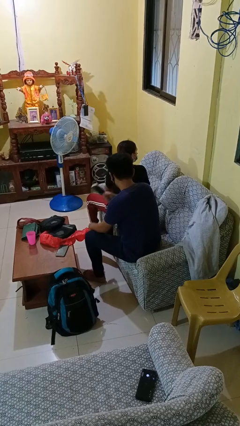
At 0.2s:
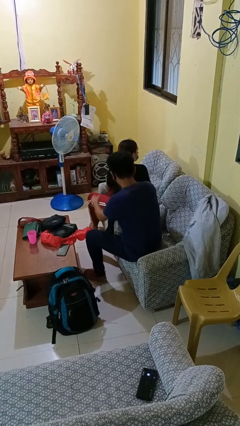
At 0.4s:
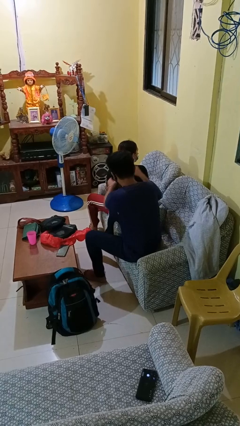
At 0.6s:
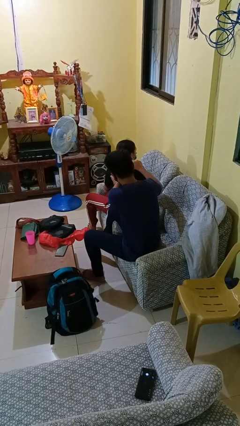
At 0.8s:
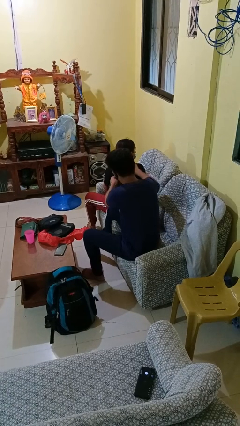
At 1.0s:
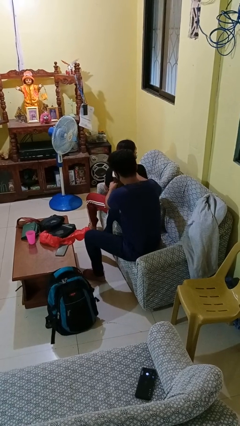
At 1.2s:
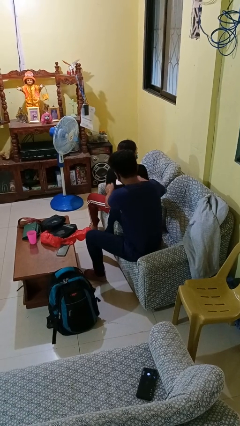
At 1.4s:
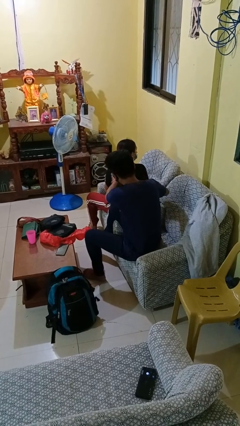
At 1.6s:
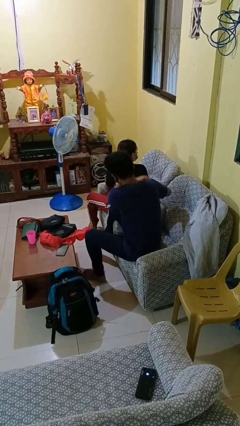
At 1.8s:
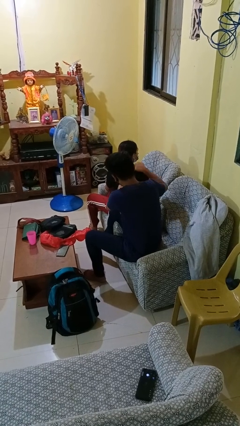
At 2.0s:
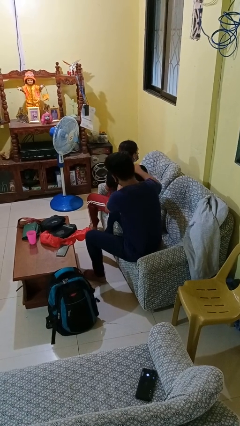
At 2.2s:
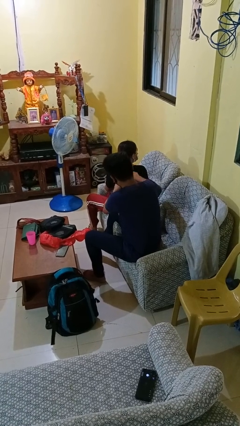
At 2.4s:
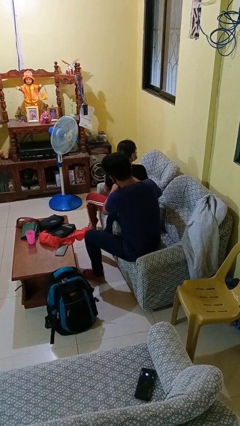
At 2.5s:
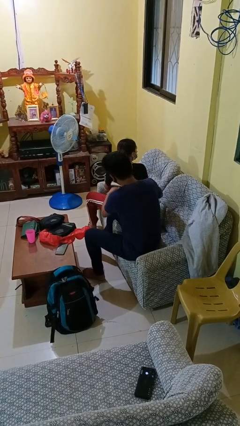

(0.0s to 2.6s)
person brushes hair of person

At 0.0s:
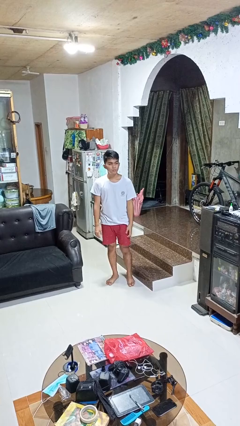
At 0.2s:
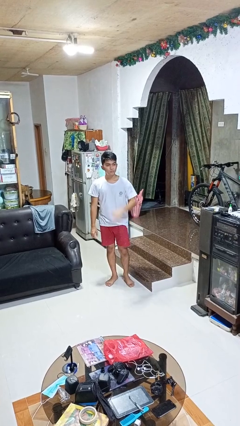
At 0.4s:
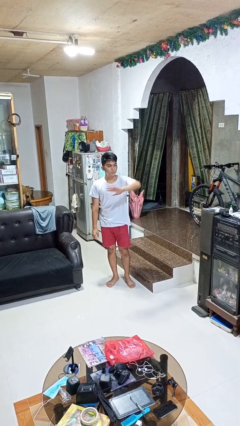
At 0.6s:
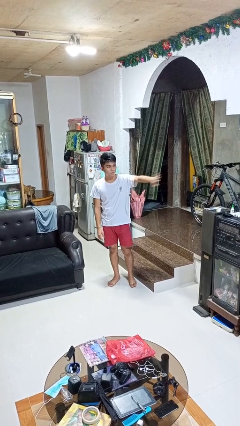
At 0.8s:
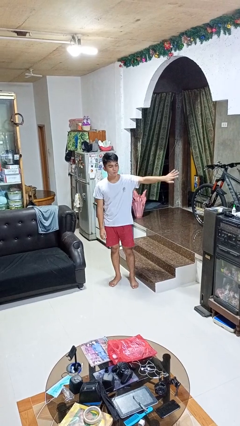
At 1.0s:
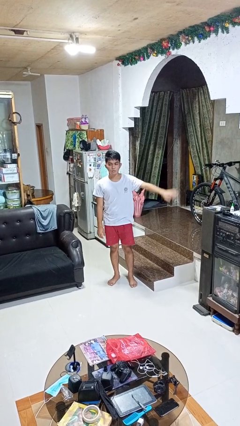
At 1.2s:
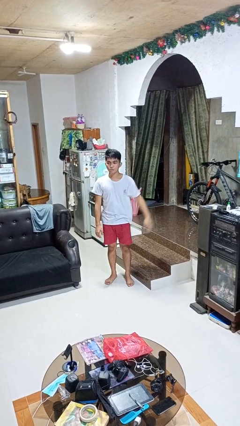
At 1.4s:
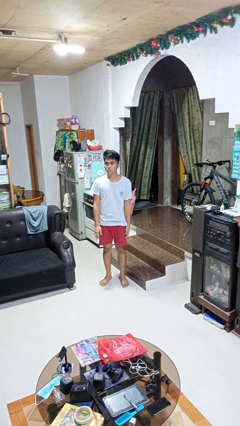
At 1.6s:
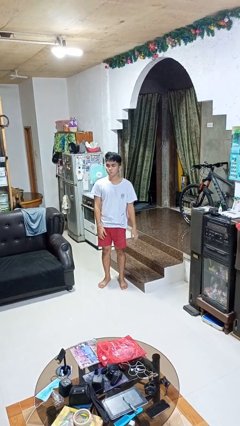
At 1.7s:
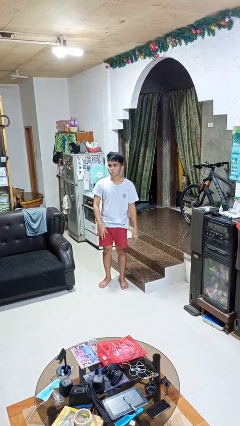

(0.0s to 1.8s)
person gestures swipe left

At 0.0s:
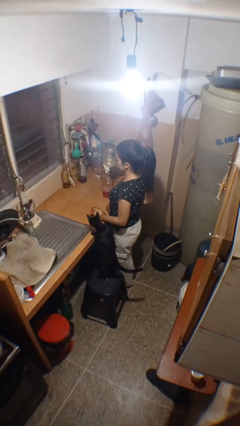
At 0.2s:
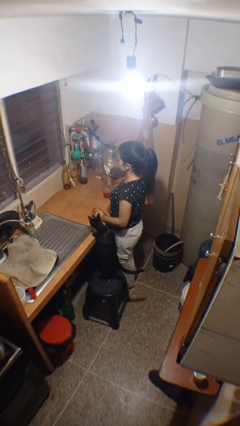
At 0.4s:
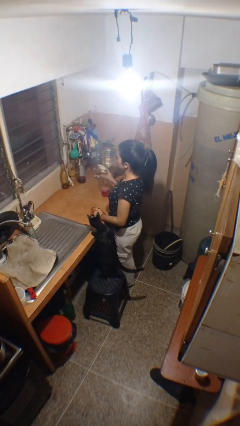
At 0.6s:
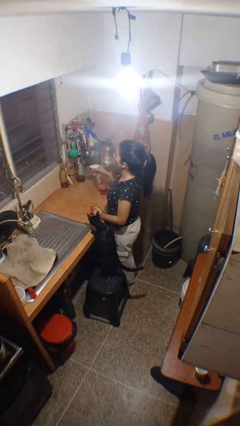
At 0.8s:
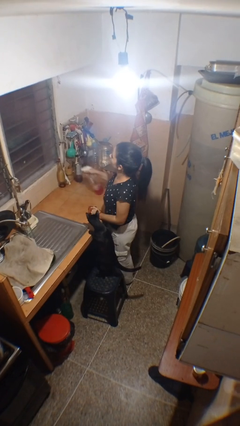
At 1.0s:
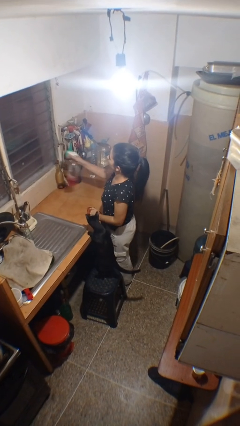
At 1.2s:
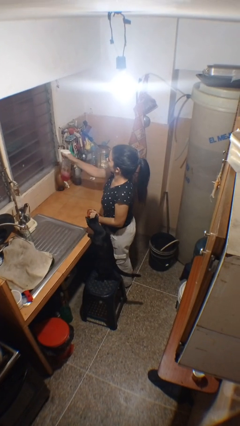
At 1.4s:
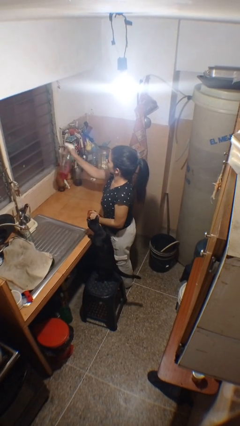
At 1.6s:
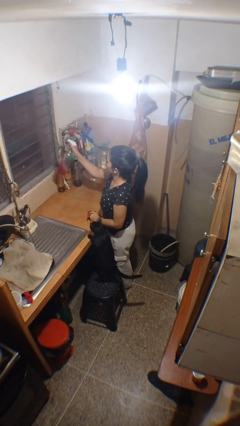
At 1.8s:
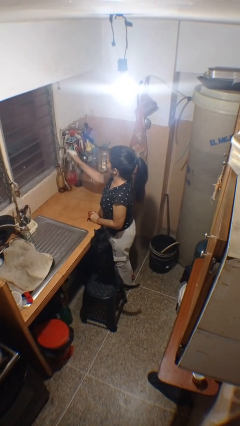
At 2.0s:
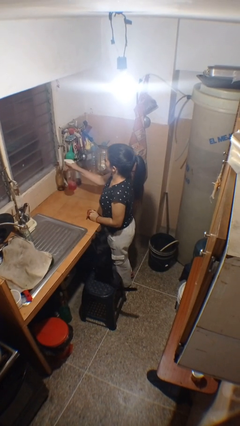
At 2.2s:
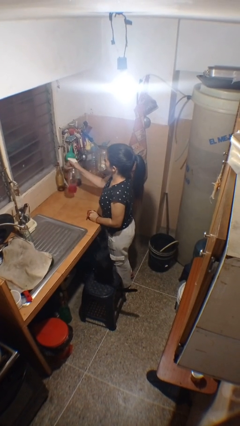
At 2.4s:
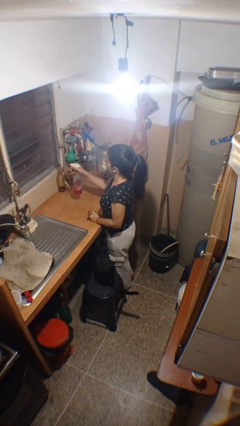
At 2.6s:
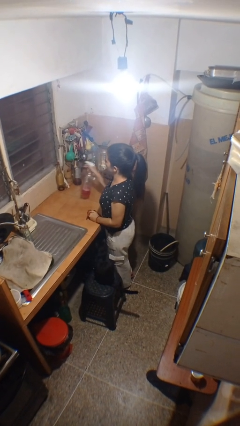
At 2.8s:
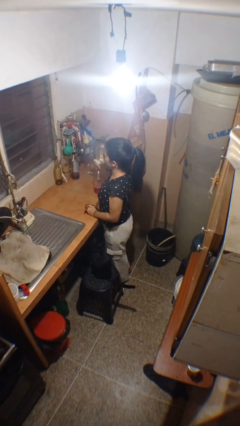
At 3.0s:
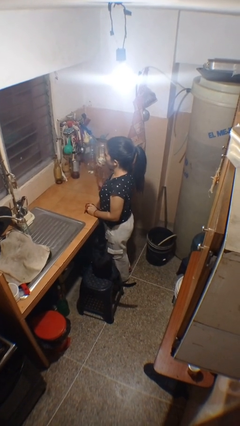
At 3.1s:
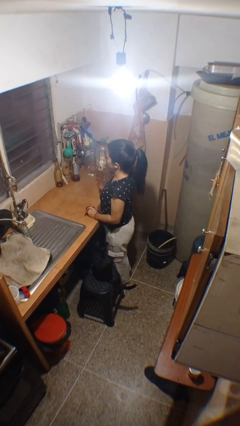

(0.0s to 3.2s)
person sprays from bottle

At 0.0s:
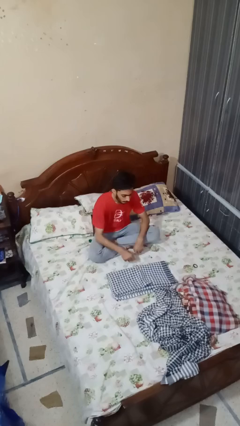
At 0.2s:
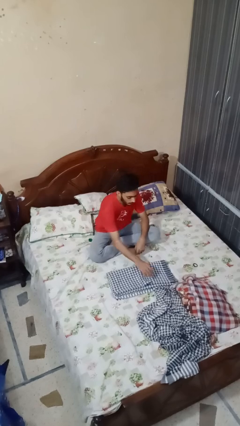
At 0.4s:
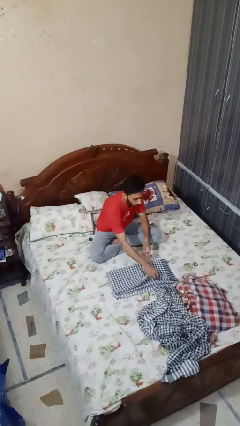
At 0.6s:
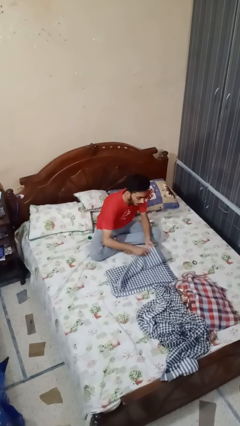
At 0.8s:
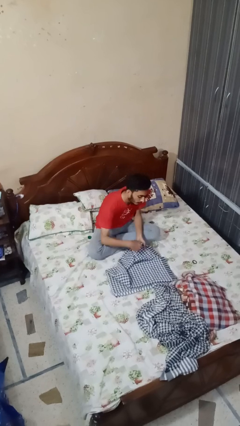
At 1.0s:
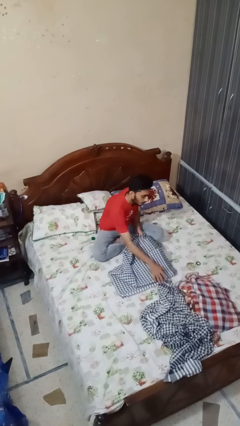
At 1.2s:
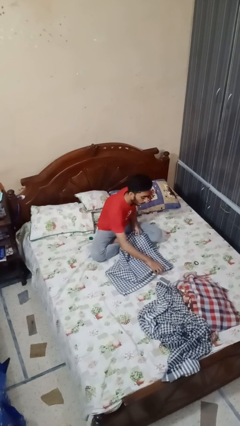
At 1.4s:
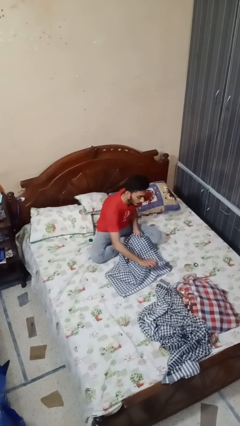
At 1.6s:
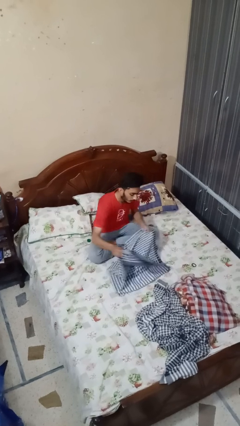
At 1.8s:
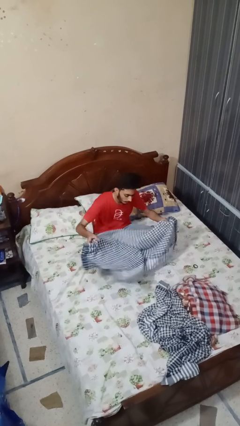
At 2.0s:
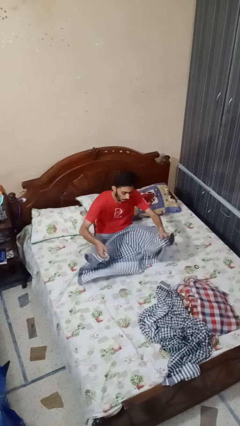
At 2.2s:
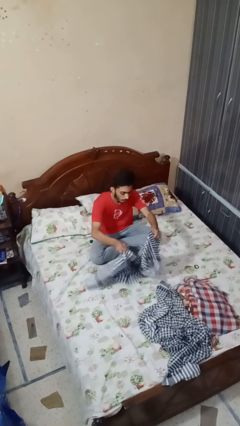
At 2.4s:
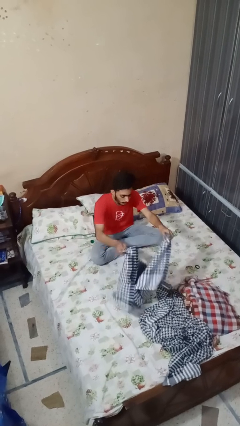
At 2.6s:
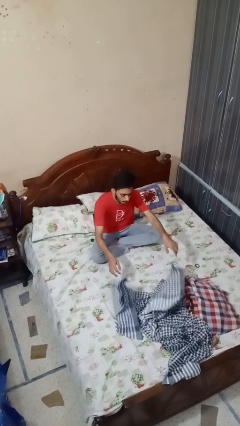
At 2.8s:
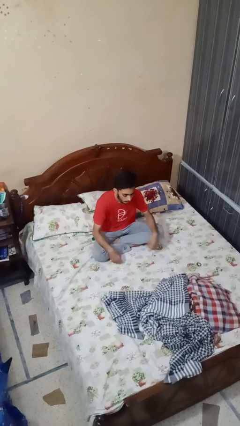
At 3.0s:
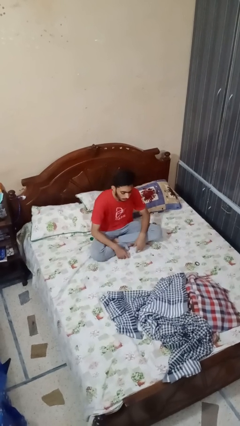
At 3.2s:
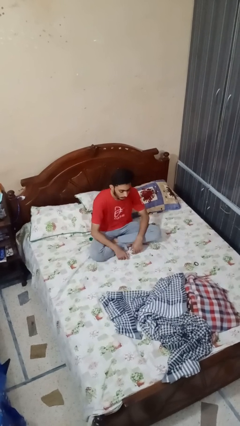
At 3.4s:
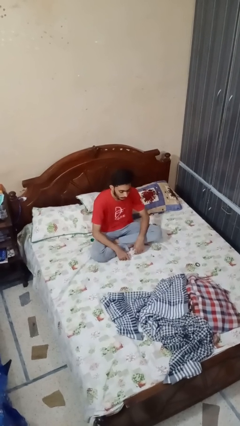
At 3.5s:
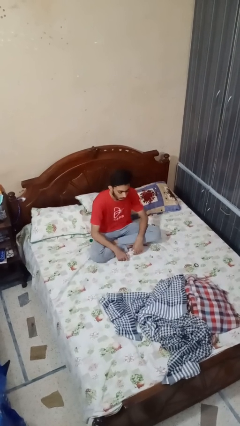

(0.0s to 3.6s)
person unfolds blanket

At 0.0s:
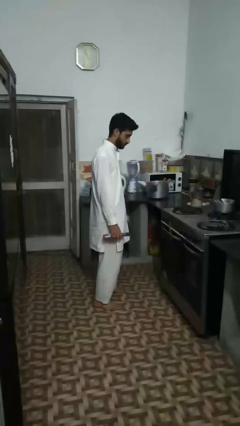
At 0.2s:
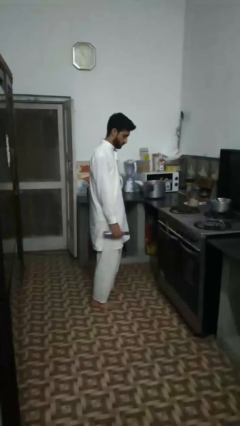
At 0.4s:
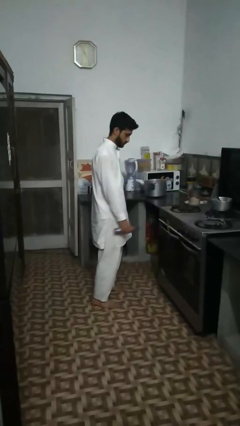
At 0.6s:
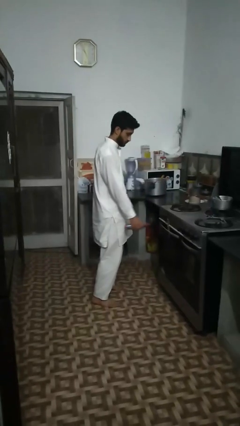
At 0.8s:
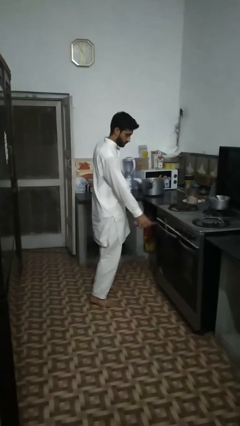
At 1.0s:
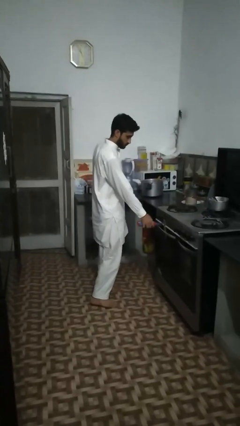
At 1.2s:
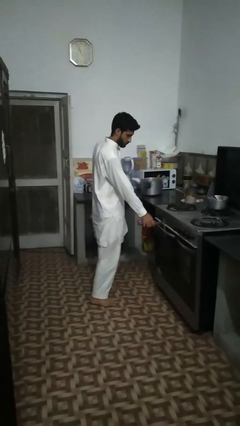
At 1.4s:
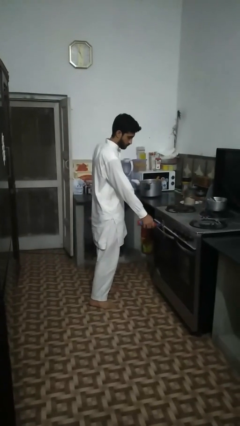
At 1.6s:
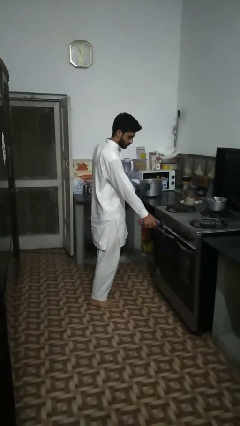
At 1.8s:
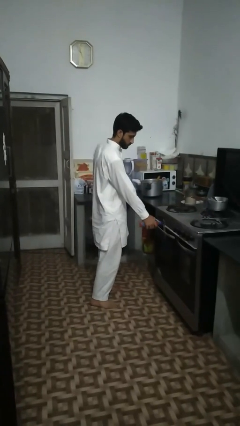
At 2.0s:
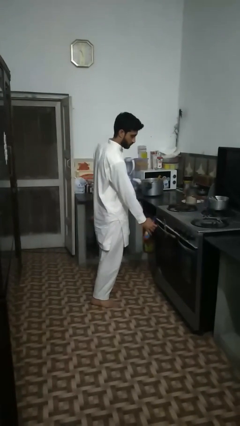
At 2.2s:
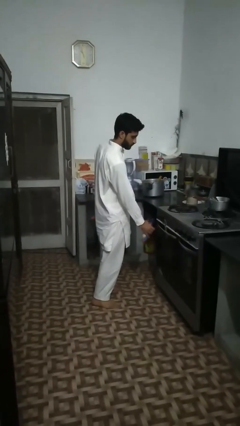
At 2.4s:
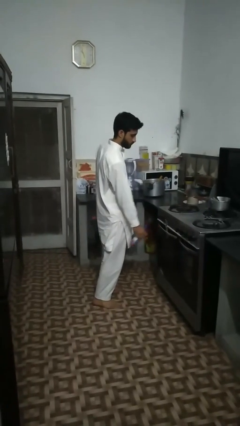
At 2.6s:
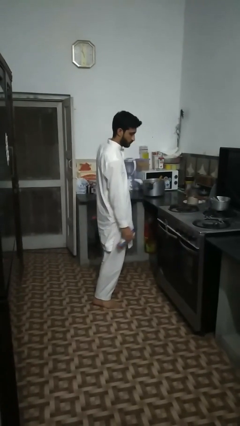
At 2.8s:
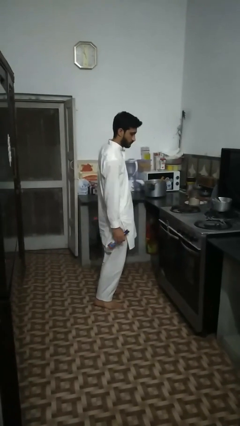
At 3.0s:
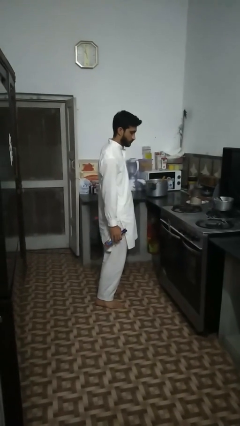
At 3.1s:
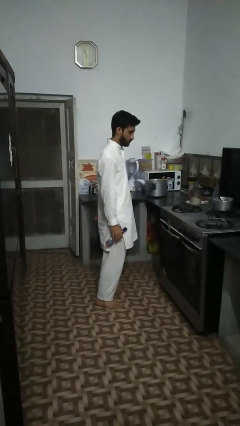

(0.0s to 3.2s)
person opens can with can opener

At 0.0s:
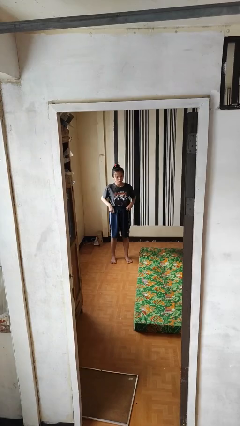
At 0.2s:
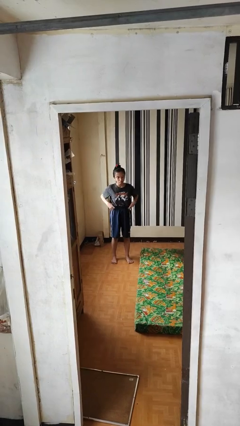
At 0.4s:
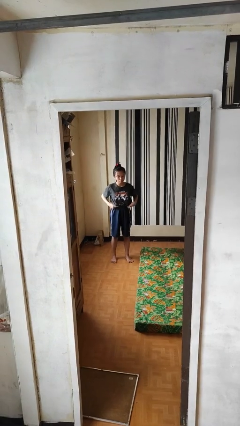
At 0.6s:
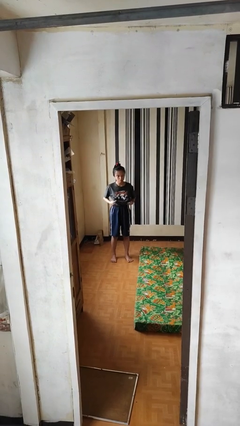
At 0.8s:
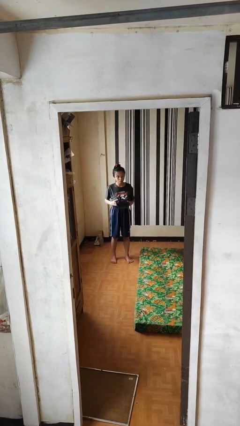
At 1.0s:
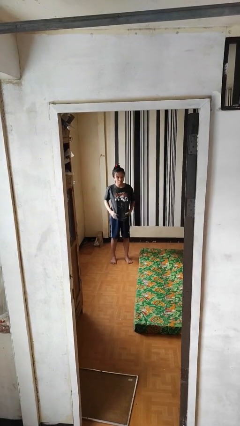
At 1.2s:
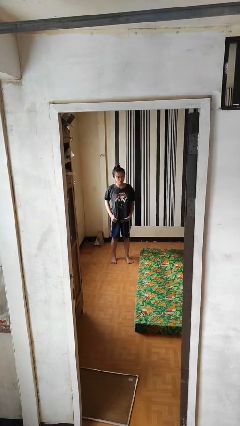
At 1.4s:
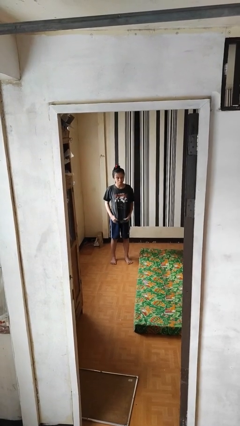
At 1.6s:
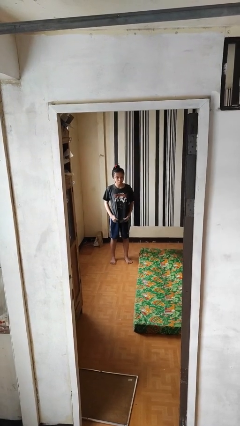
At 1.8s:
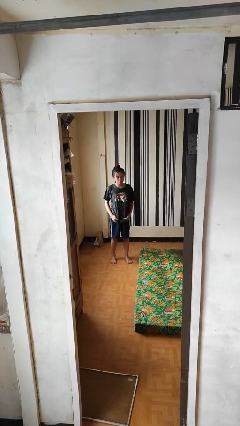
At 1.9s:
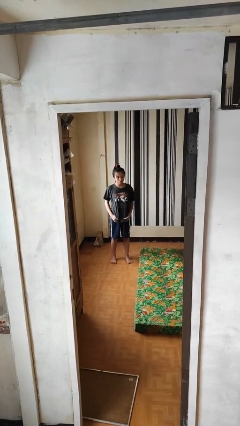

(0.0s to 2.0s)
person untucks shirt

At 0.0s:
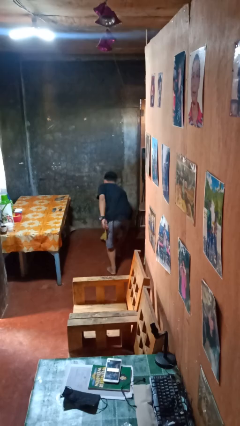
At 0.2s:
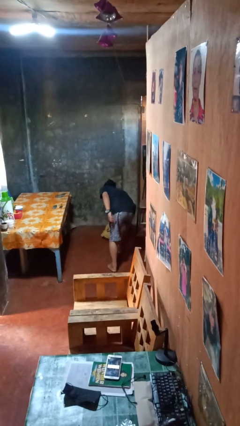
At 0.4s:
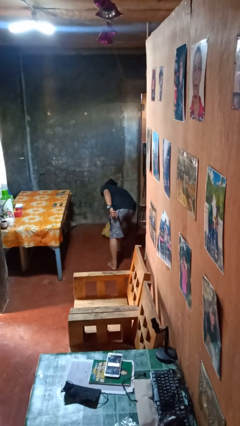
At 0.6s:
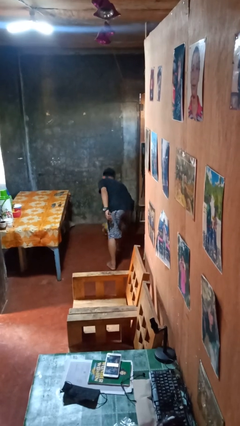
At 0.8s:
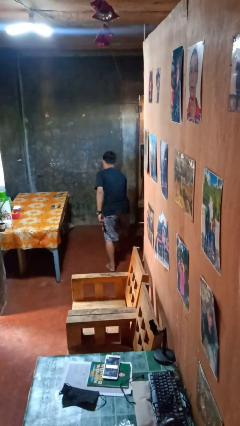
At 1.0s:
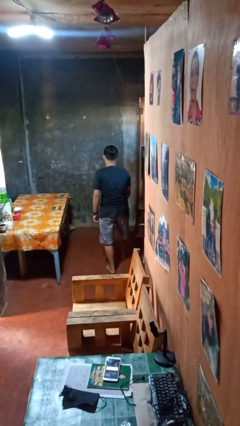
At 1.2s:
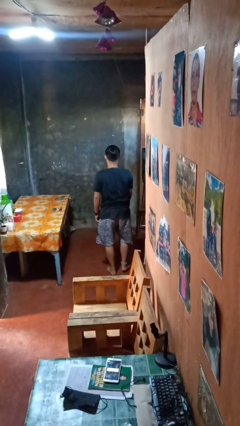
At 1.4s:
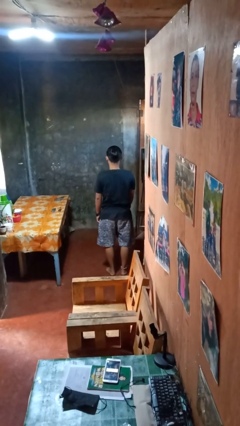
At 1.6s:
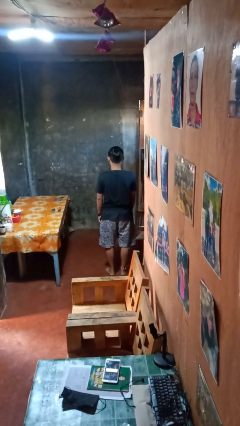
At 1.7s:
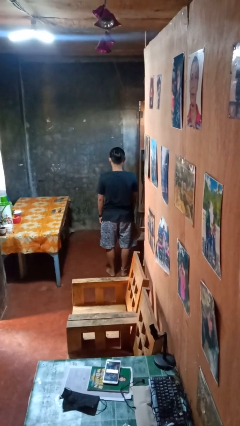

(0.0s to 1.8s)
person picks up object from floor
